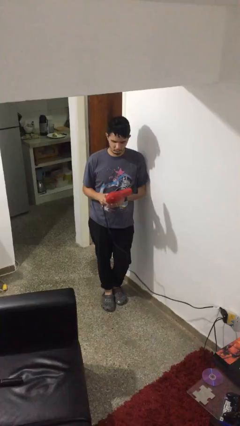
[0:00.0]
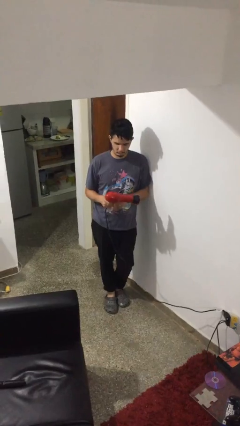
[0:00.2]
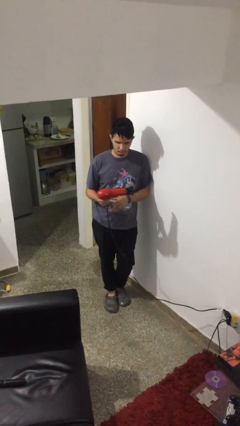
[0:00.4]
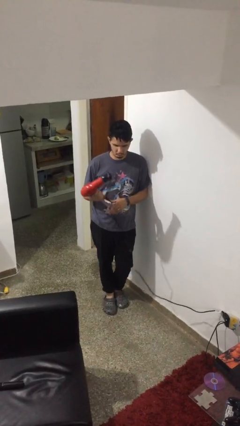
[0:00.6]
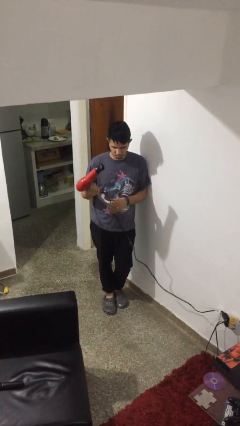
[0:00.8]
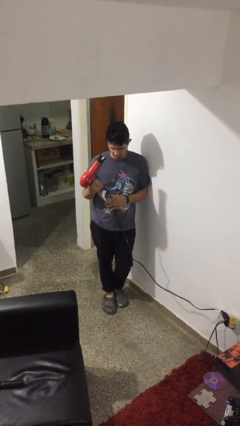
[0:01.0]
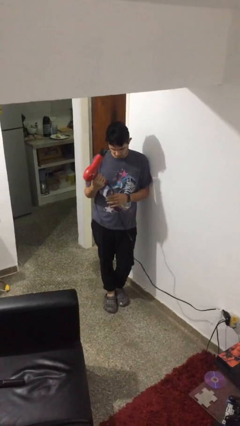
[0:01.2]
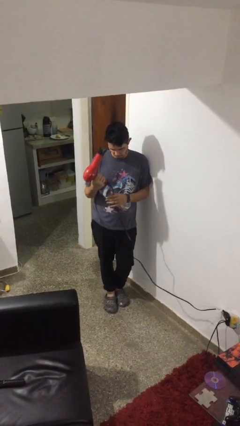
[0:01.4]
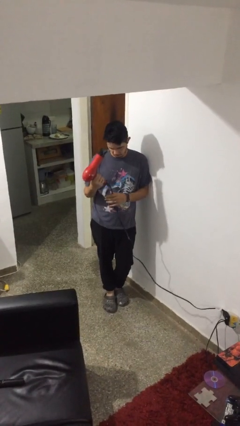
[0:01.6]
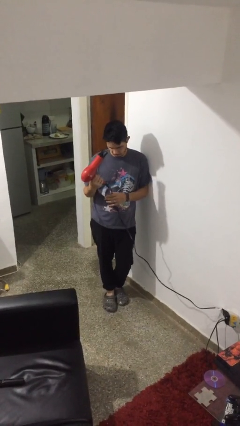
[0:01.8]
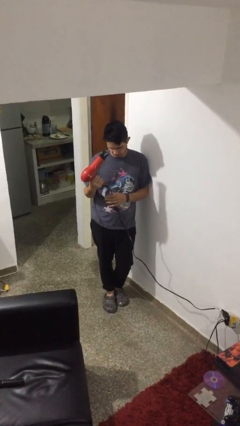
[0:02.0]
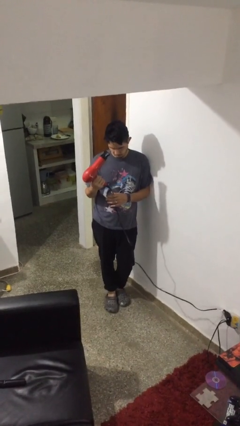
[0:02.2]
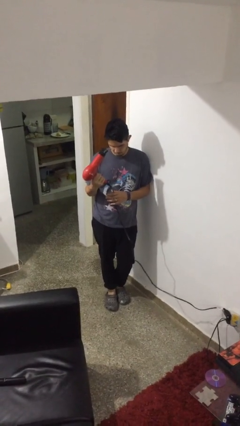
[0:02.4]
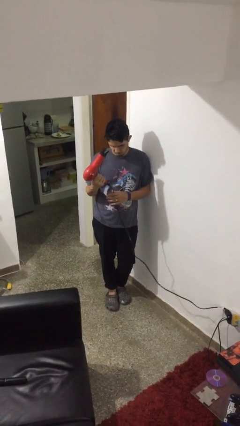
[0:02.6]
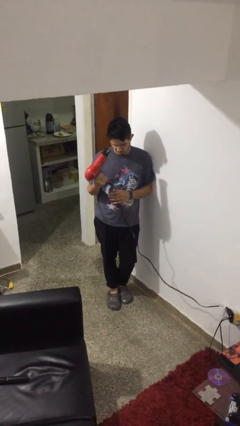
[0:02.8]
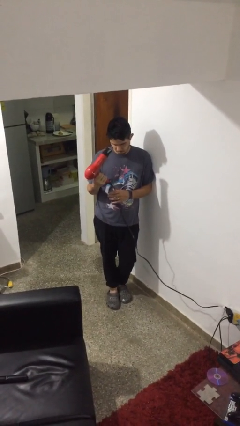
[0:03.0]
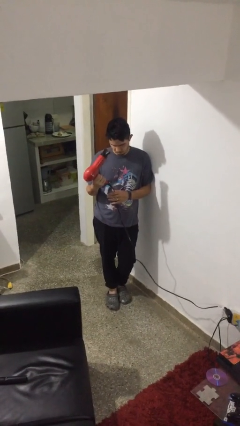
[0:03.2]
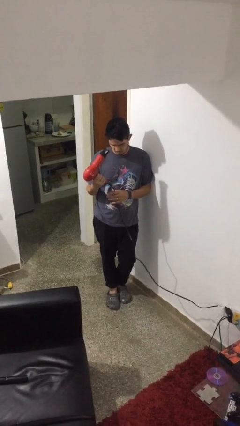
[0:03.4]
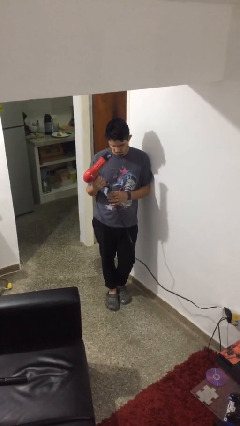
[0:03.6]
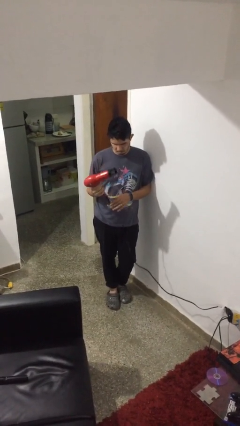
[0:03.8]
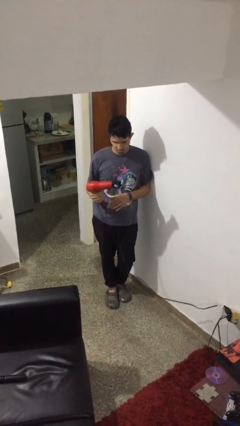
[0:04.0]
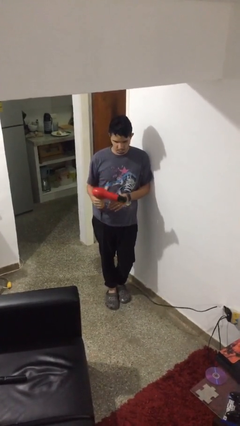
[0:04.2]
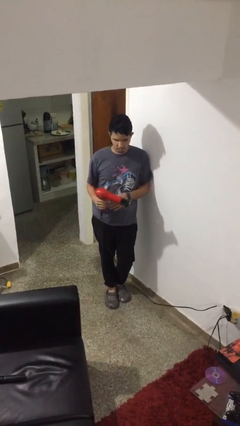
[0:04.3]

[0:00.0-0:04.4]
person dries hair with hairdryer

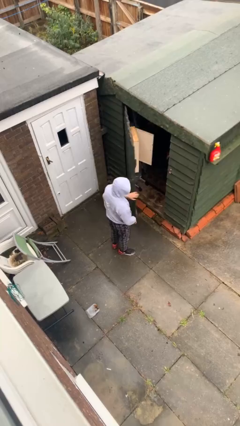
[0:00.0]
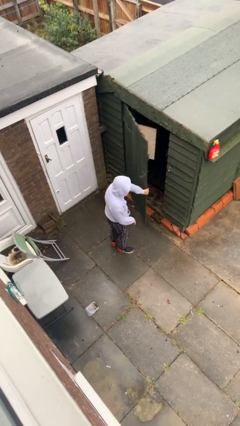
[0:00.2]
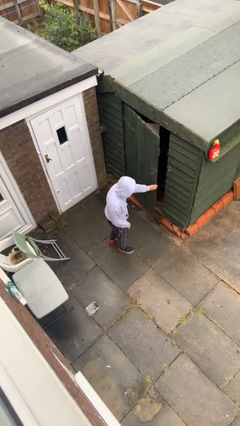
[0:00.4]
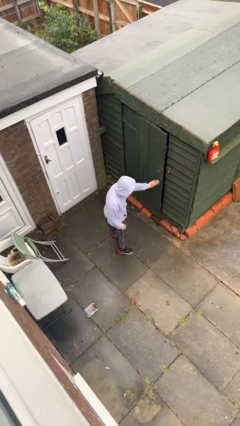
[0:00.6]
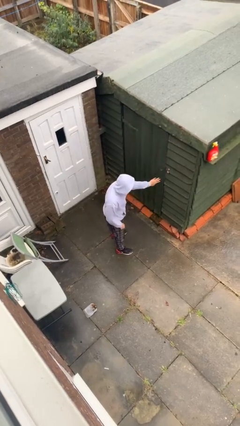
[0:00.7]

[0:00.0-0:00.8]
person closes facility door

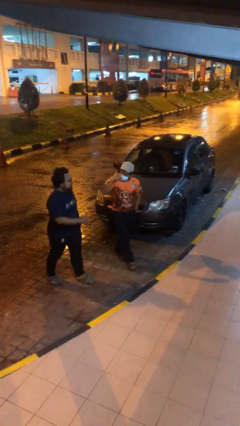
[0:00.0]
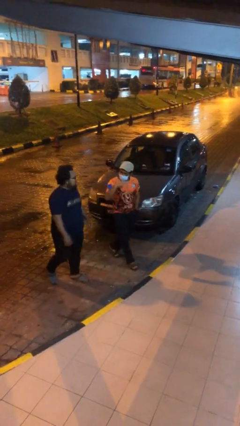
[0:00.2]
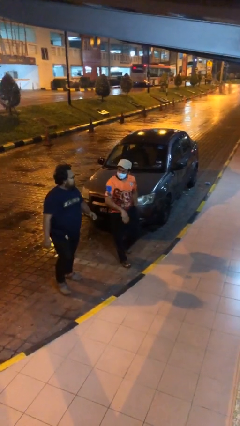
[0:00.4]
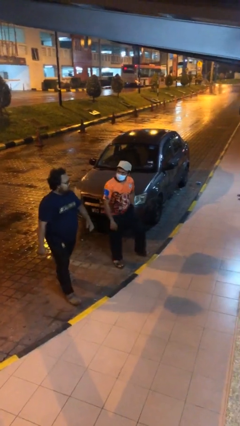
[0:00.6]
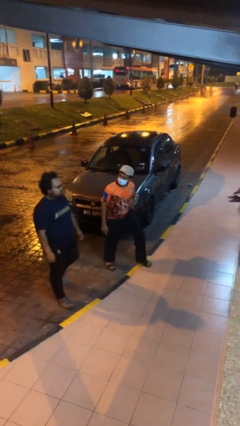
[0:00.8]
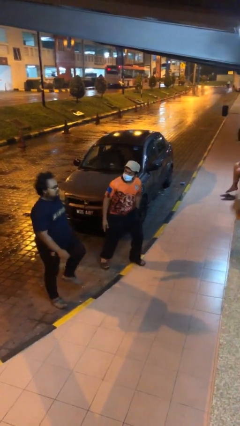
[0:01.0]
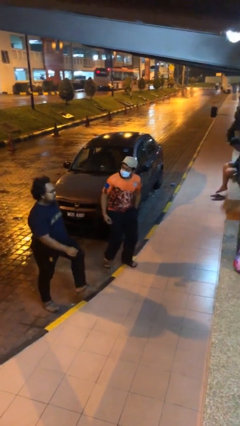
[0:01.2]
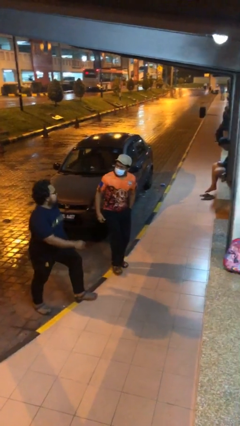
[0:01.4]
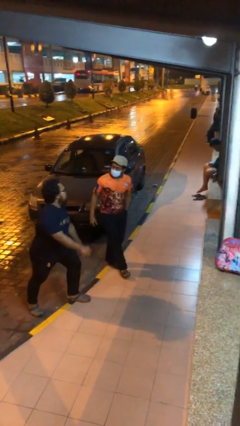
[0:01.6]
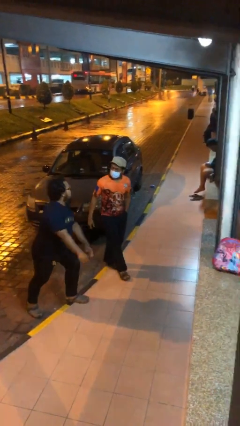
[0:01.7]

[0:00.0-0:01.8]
person talks to person

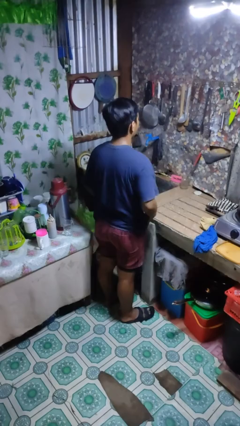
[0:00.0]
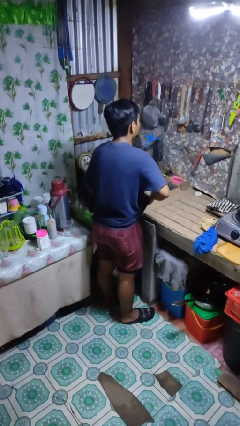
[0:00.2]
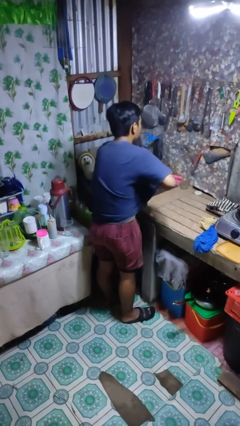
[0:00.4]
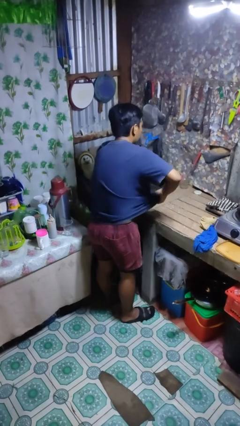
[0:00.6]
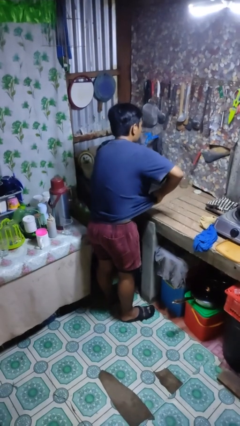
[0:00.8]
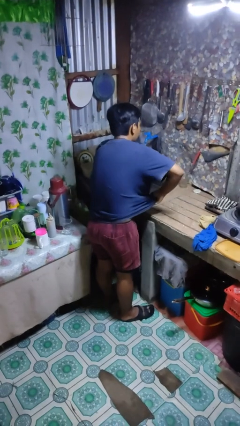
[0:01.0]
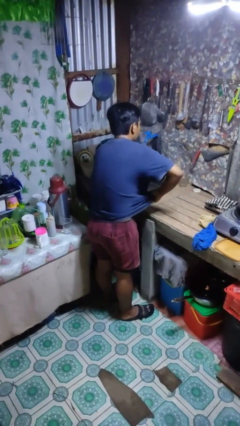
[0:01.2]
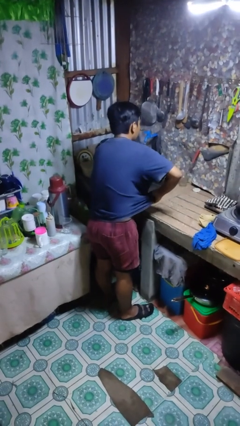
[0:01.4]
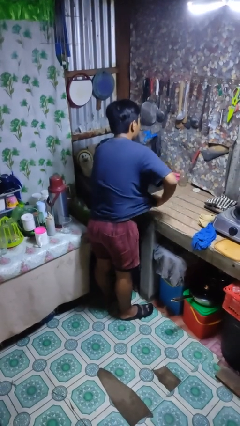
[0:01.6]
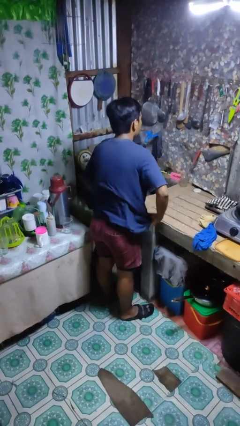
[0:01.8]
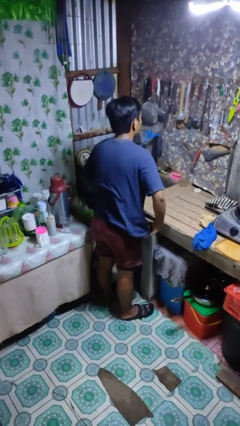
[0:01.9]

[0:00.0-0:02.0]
person applies deodorant

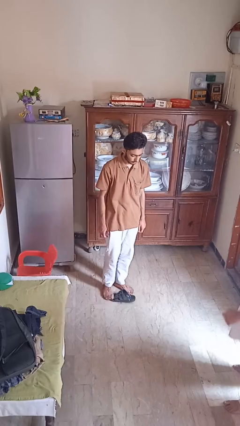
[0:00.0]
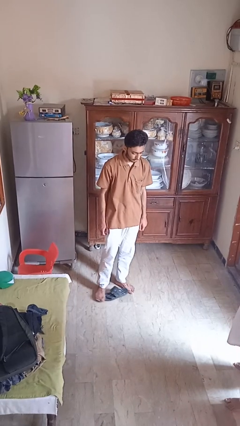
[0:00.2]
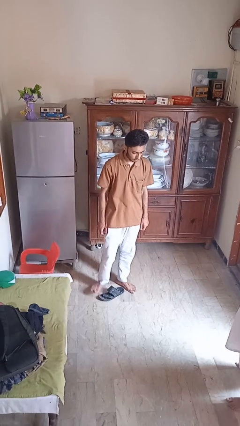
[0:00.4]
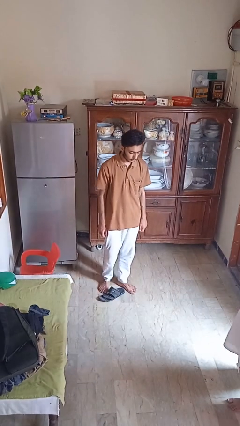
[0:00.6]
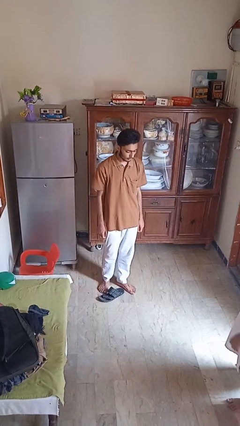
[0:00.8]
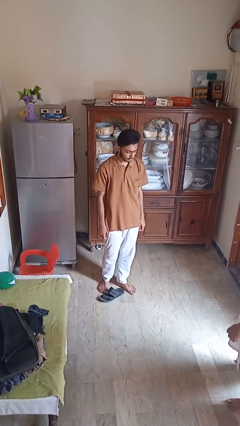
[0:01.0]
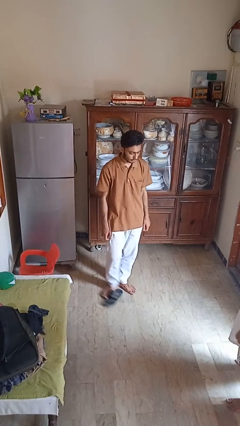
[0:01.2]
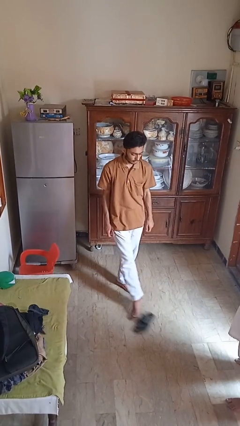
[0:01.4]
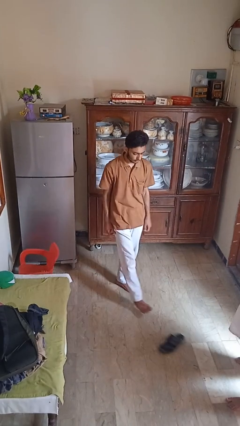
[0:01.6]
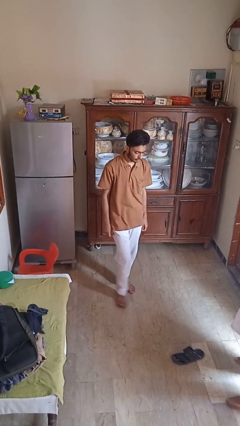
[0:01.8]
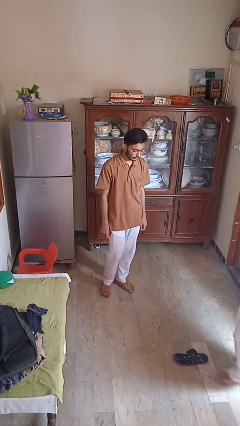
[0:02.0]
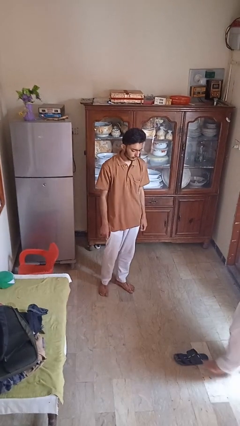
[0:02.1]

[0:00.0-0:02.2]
person kicks object to person

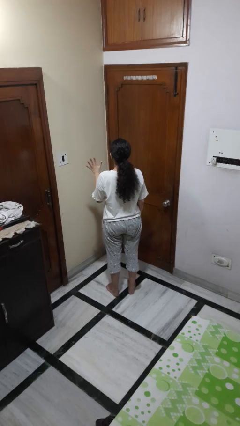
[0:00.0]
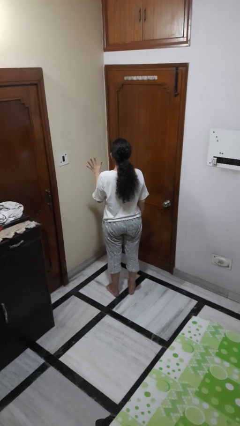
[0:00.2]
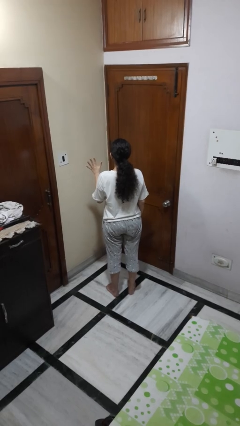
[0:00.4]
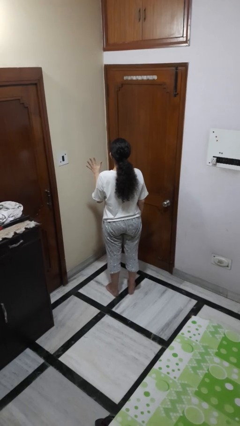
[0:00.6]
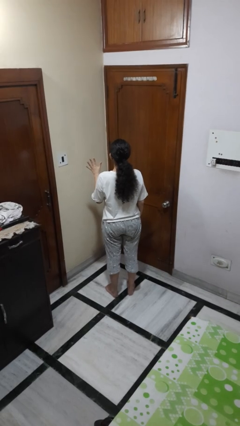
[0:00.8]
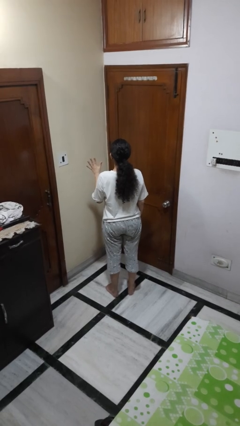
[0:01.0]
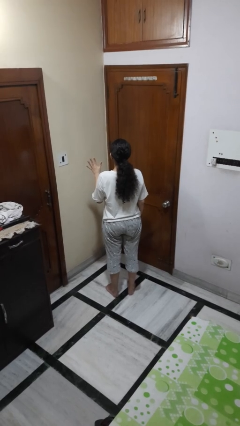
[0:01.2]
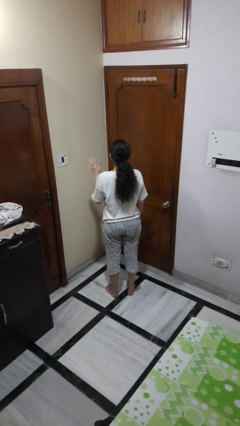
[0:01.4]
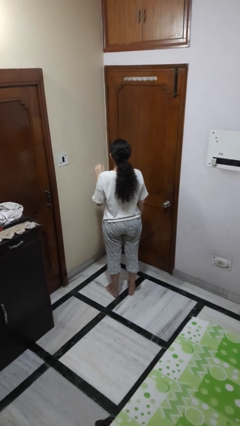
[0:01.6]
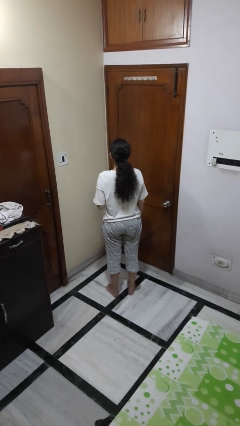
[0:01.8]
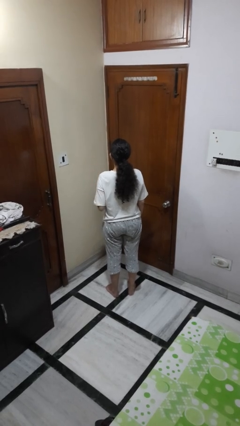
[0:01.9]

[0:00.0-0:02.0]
person gestures number five

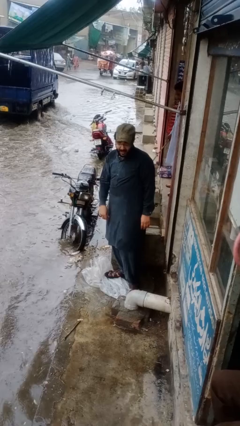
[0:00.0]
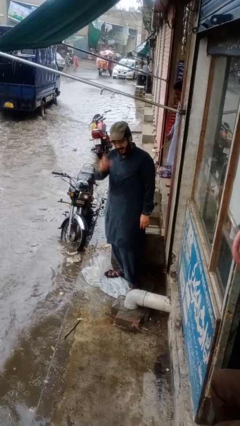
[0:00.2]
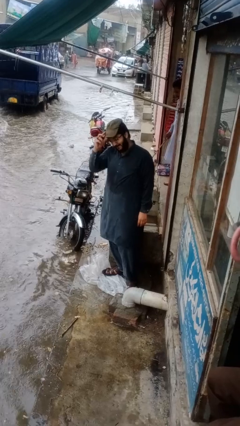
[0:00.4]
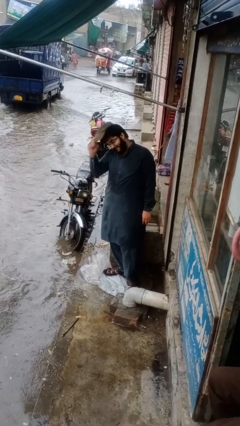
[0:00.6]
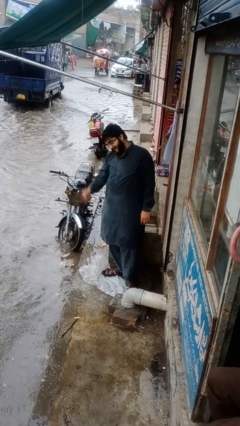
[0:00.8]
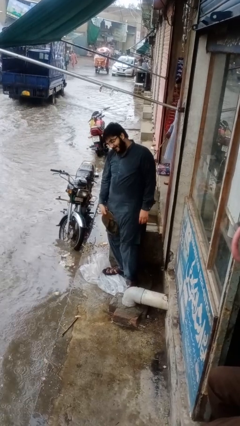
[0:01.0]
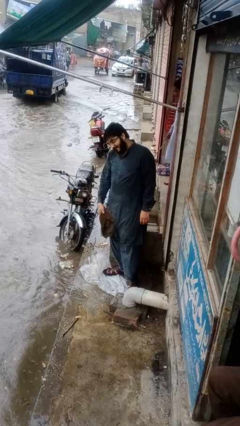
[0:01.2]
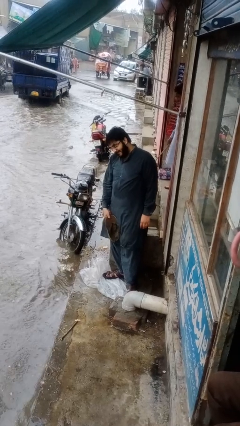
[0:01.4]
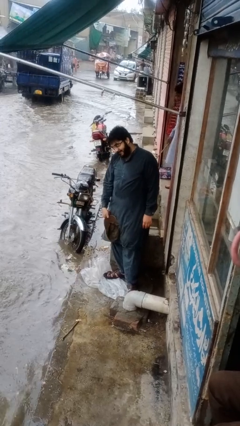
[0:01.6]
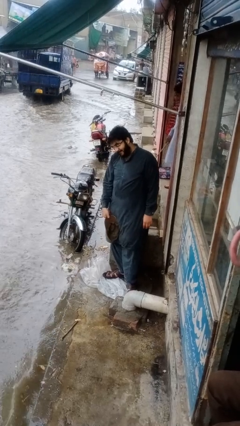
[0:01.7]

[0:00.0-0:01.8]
person takes off hat

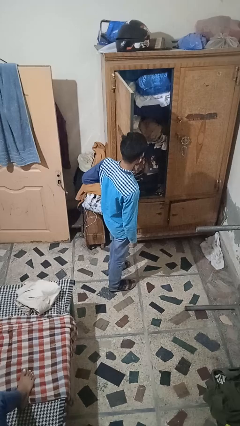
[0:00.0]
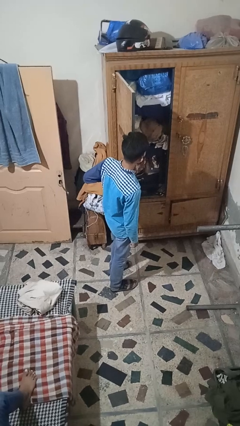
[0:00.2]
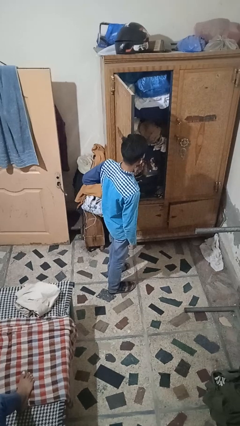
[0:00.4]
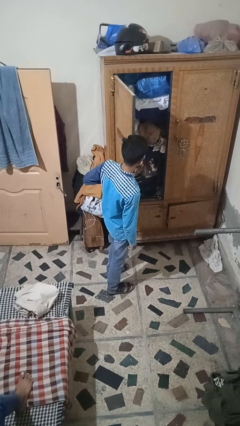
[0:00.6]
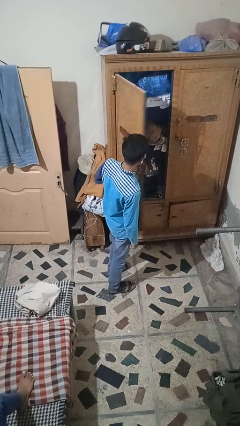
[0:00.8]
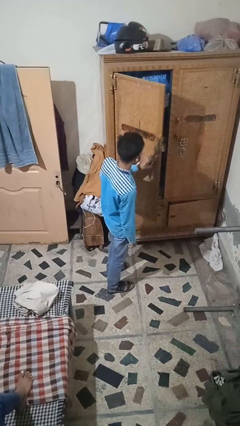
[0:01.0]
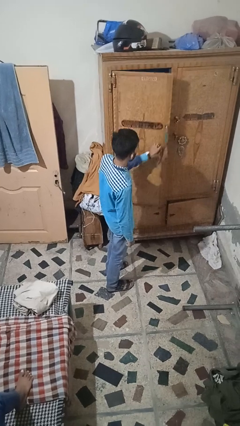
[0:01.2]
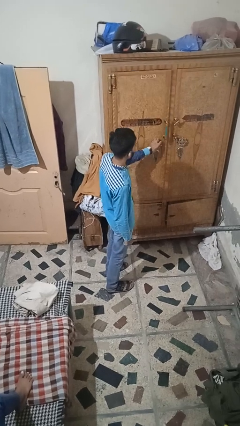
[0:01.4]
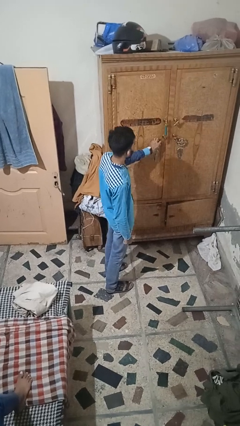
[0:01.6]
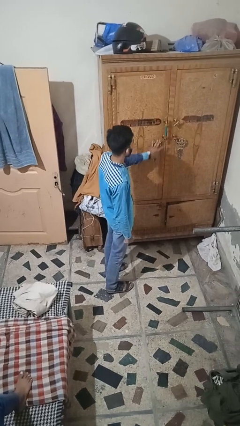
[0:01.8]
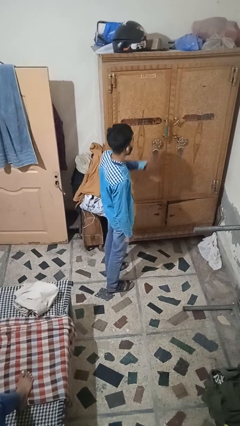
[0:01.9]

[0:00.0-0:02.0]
person closes closet door
